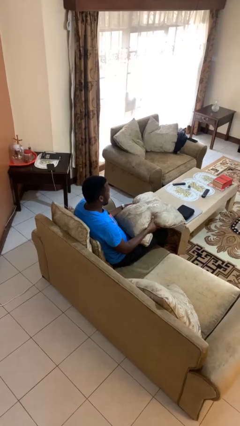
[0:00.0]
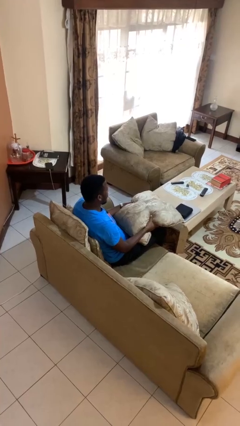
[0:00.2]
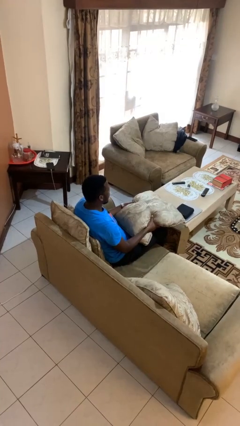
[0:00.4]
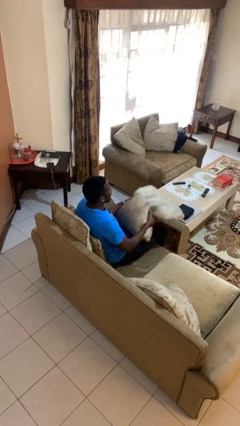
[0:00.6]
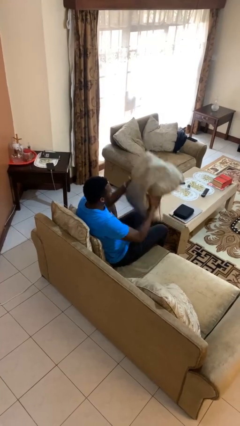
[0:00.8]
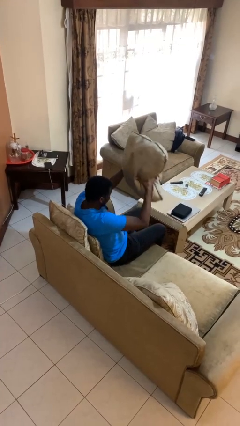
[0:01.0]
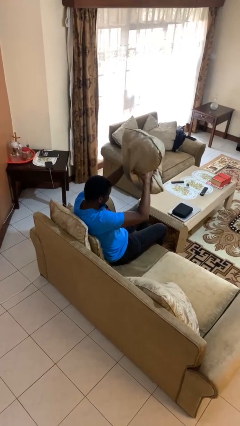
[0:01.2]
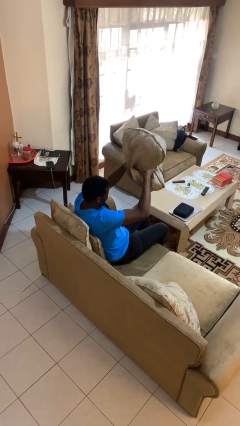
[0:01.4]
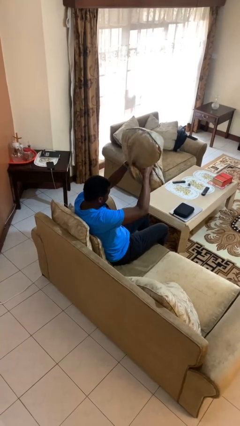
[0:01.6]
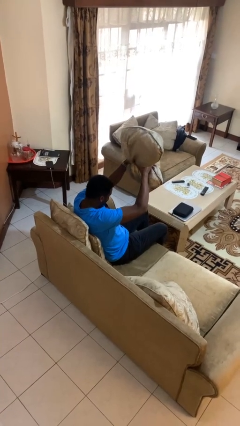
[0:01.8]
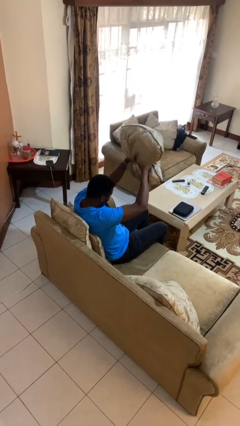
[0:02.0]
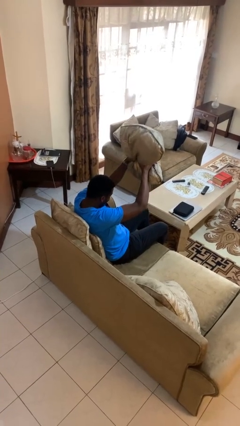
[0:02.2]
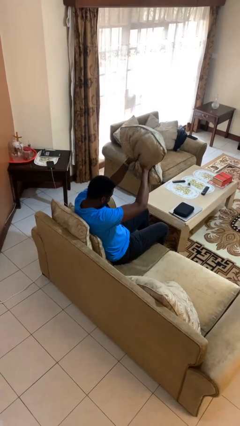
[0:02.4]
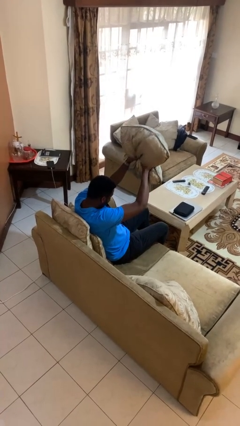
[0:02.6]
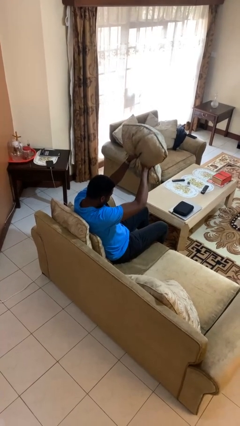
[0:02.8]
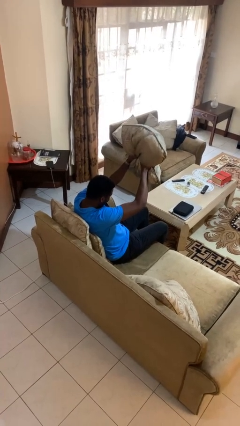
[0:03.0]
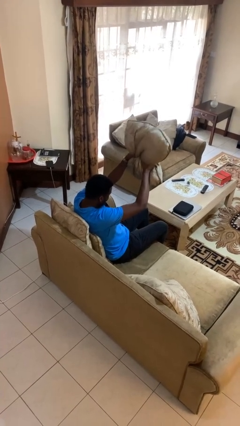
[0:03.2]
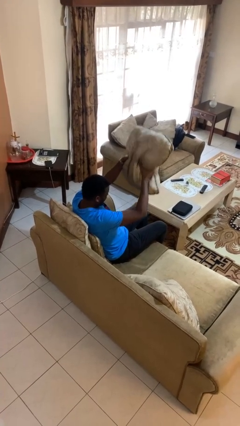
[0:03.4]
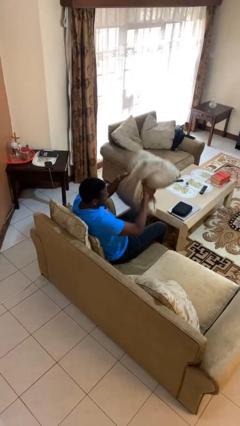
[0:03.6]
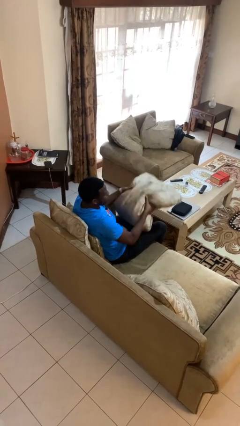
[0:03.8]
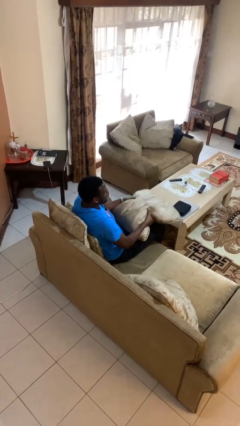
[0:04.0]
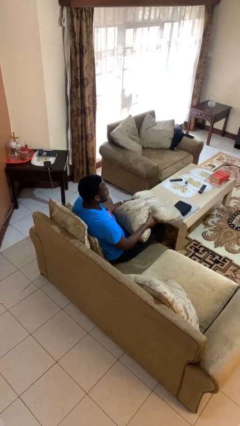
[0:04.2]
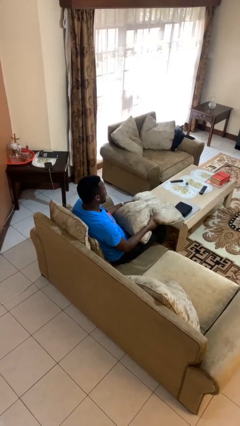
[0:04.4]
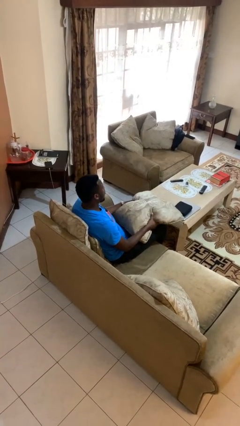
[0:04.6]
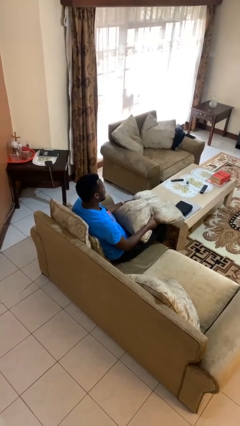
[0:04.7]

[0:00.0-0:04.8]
person squeezes object

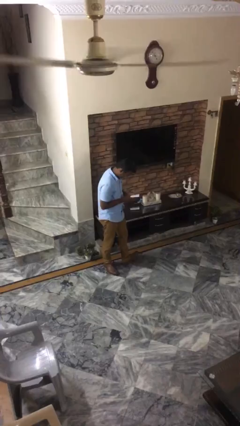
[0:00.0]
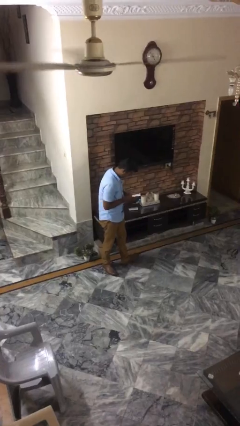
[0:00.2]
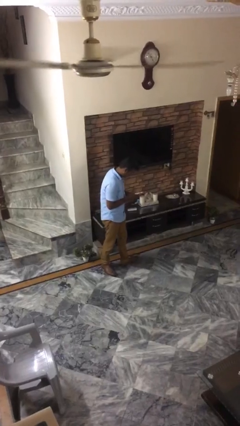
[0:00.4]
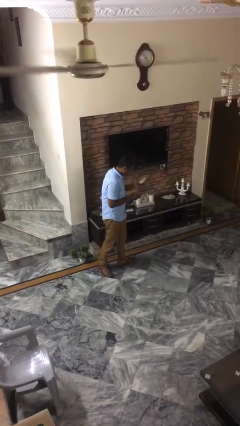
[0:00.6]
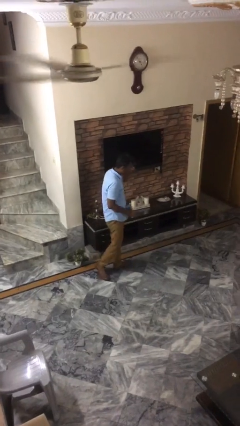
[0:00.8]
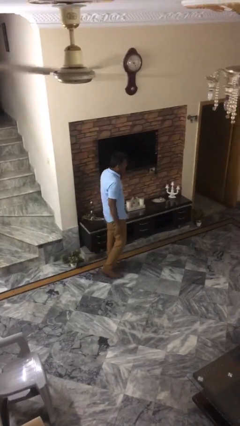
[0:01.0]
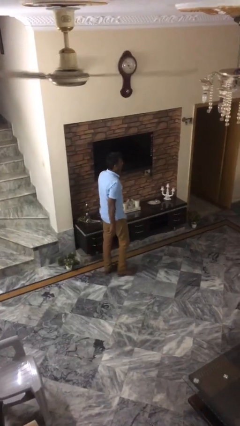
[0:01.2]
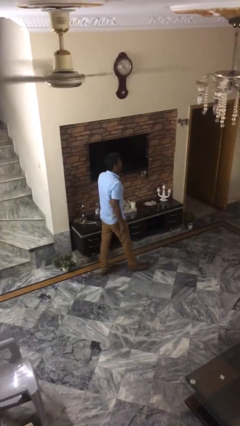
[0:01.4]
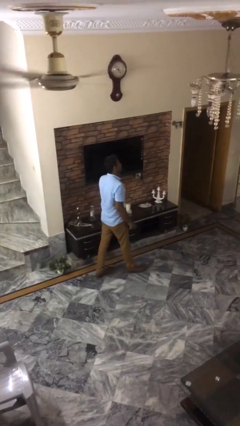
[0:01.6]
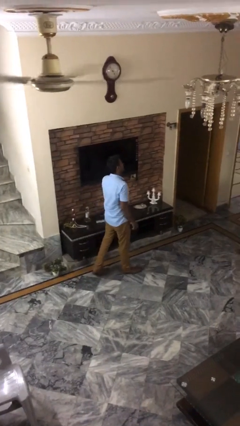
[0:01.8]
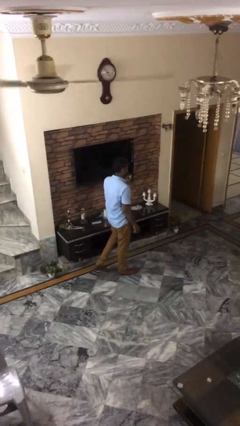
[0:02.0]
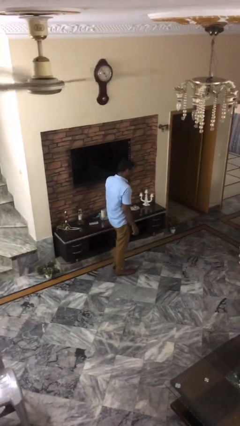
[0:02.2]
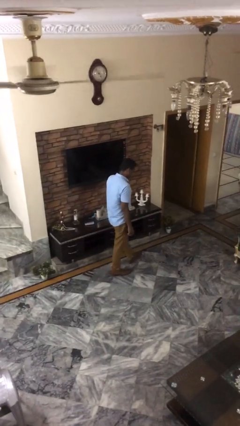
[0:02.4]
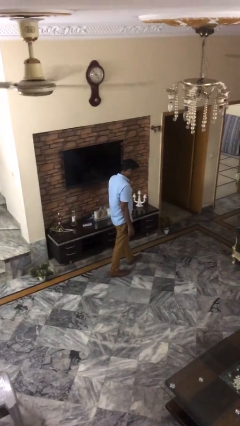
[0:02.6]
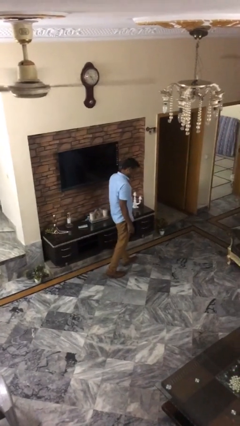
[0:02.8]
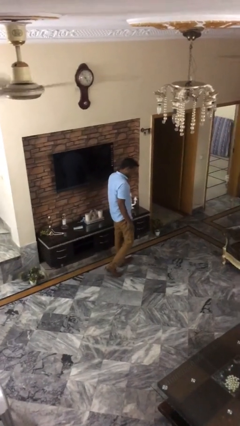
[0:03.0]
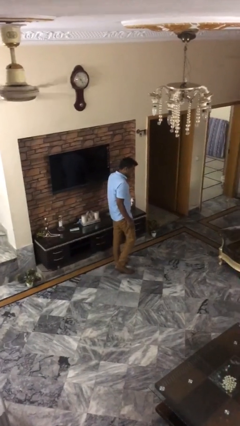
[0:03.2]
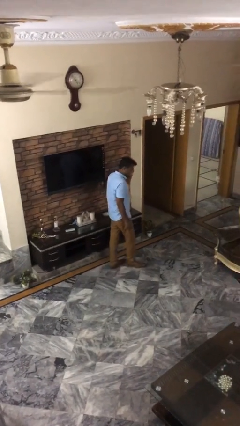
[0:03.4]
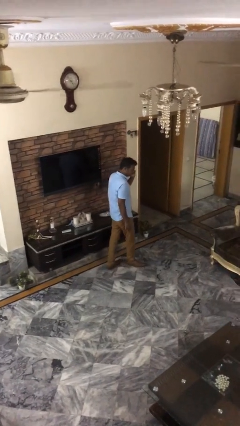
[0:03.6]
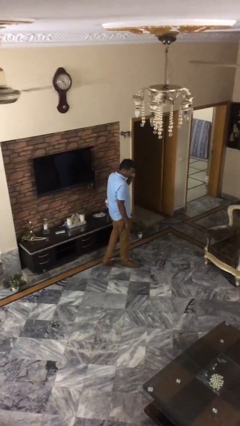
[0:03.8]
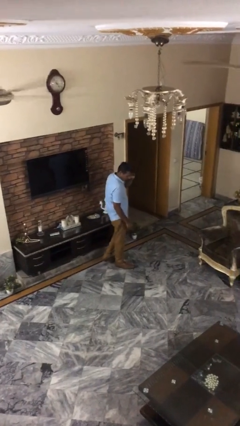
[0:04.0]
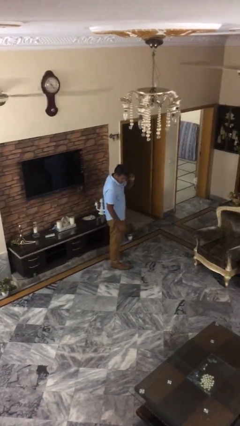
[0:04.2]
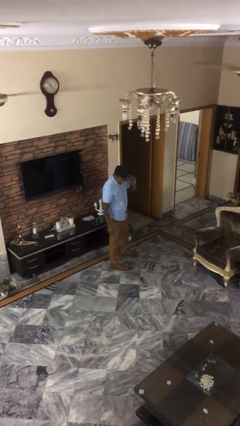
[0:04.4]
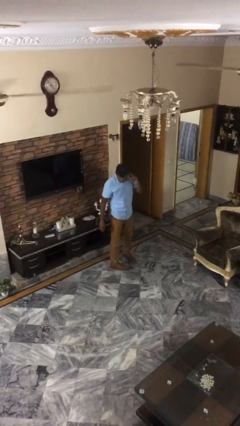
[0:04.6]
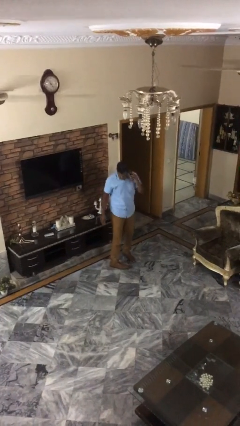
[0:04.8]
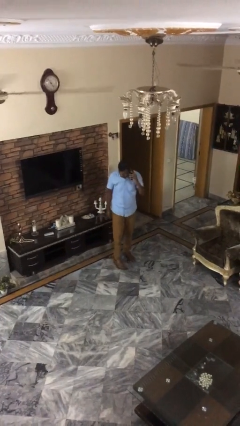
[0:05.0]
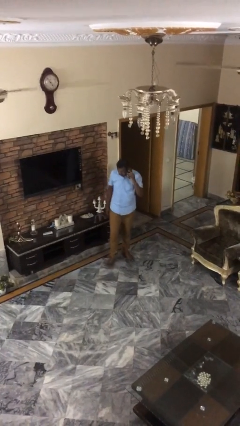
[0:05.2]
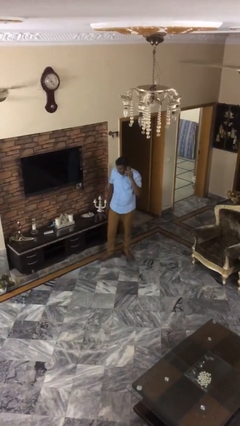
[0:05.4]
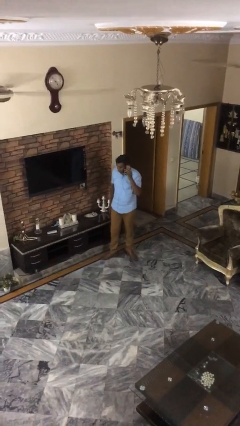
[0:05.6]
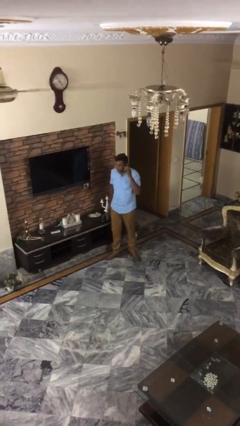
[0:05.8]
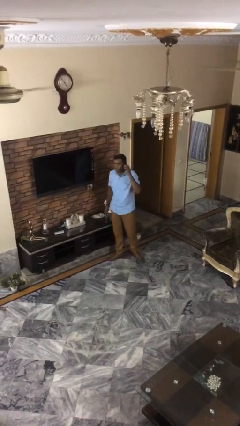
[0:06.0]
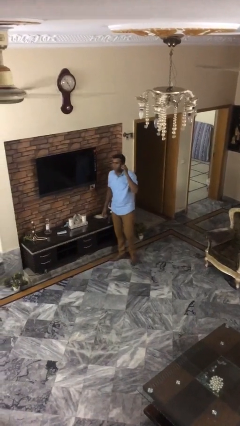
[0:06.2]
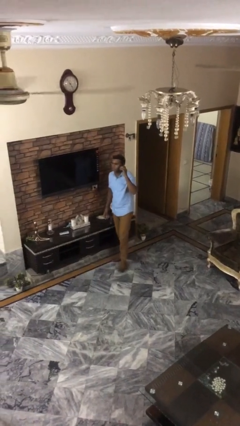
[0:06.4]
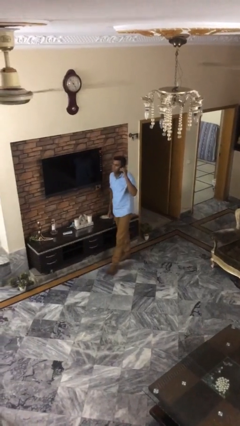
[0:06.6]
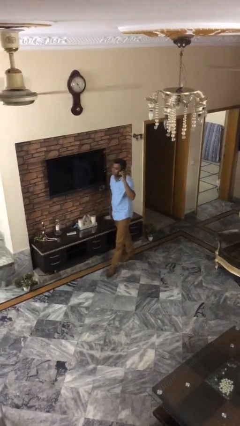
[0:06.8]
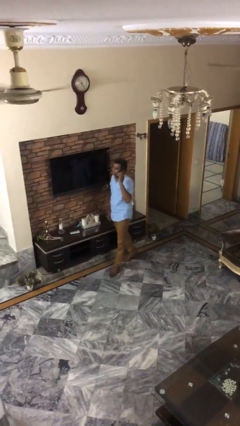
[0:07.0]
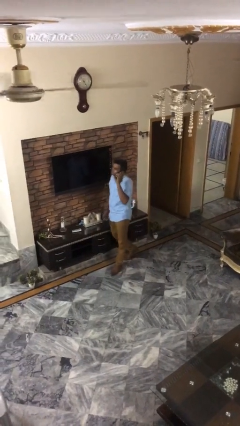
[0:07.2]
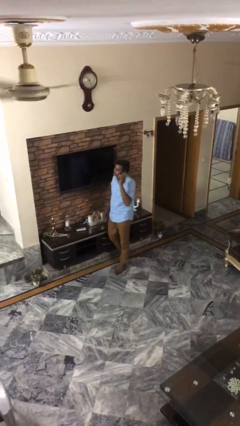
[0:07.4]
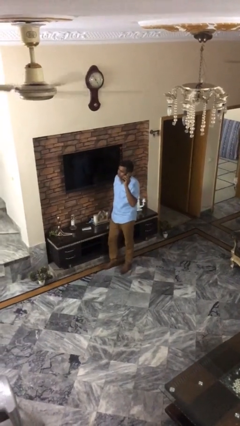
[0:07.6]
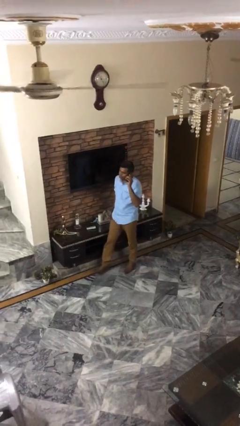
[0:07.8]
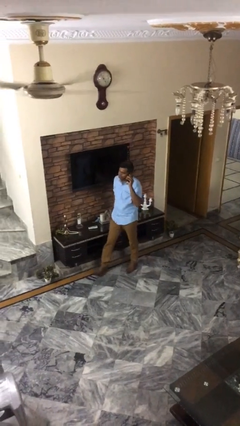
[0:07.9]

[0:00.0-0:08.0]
person talks on phone

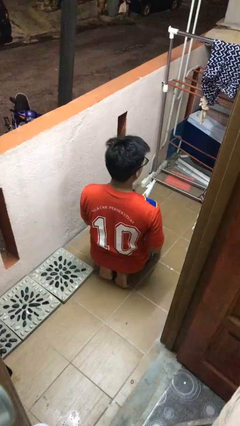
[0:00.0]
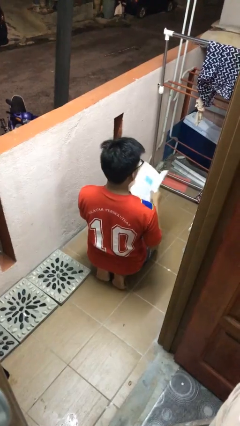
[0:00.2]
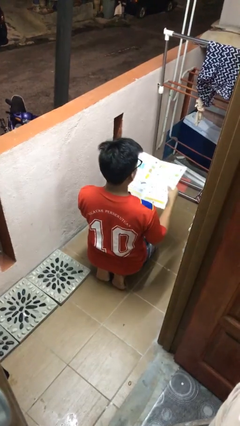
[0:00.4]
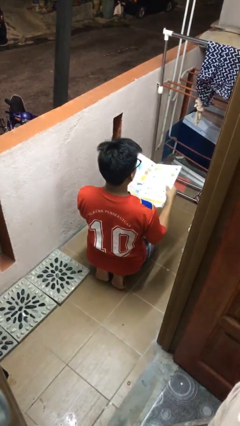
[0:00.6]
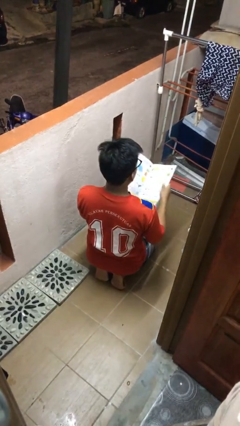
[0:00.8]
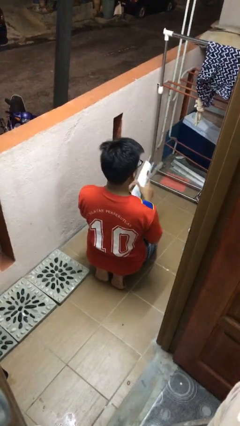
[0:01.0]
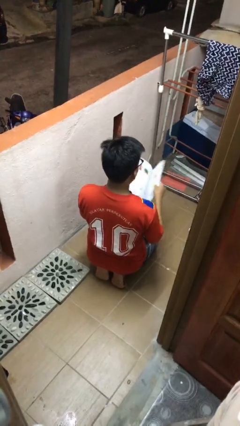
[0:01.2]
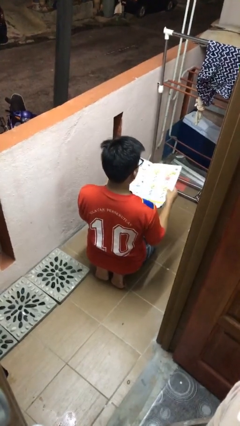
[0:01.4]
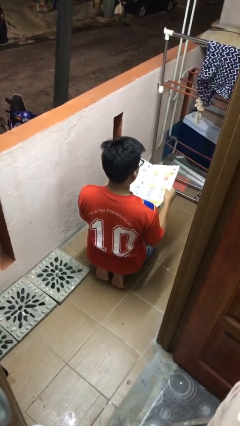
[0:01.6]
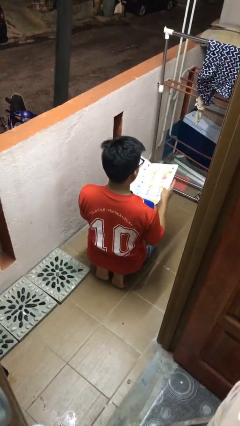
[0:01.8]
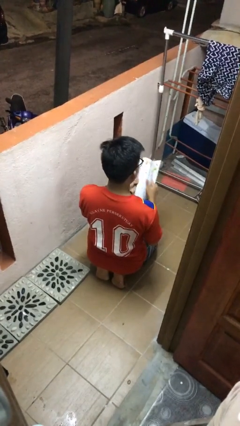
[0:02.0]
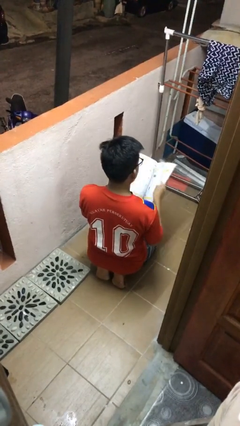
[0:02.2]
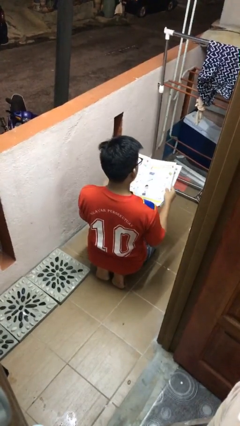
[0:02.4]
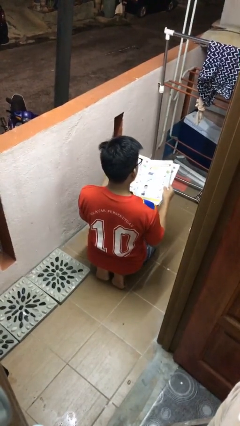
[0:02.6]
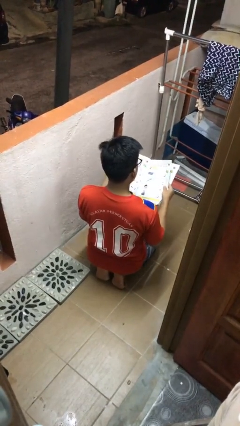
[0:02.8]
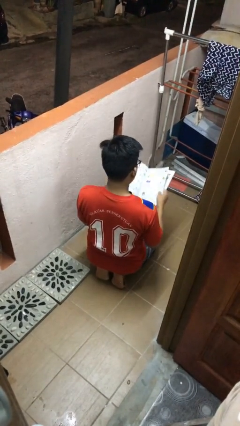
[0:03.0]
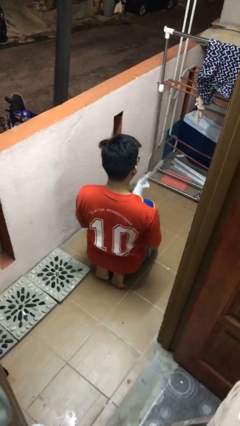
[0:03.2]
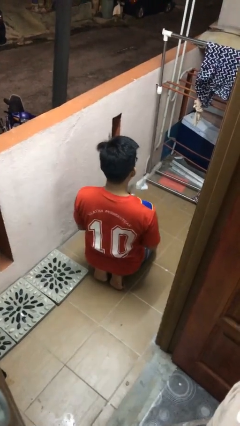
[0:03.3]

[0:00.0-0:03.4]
person reads magazine

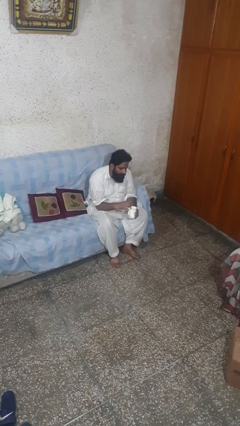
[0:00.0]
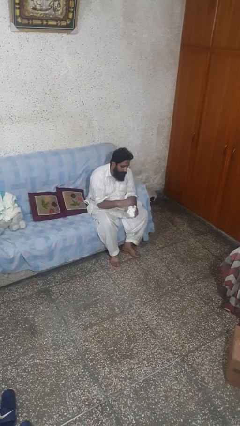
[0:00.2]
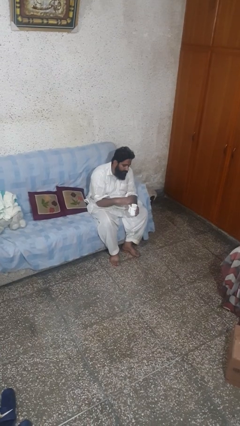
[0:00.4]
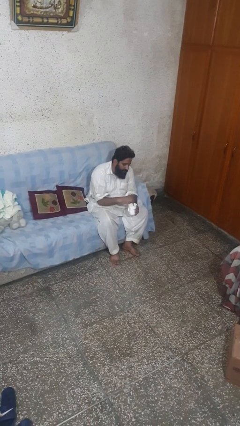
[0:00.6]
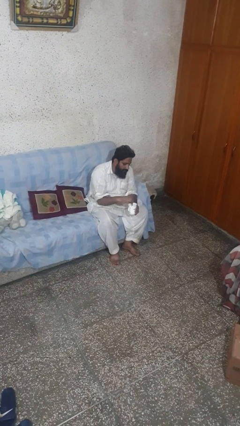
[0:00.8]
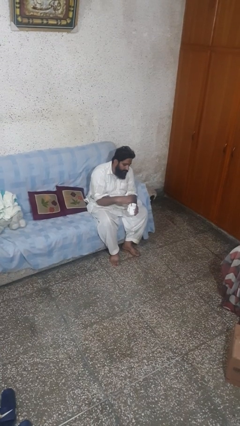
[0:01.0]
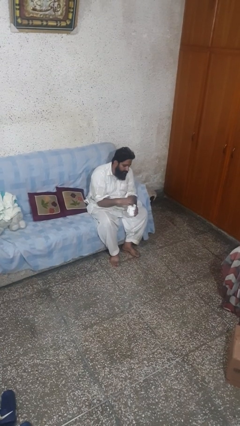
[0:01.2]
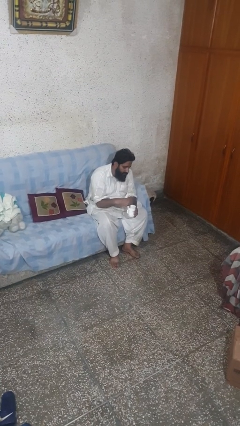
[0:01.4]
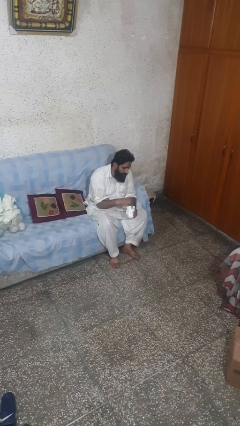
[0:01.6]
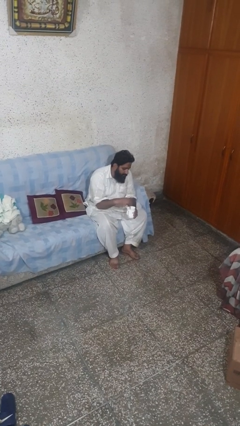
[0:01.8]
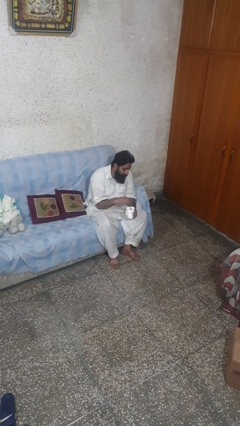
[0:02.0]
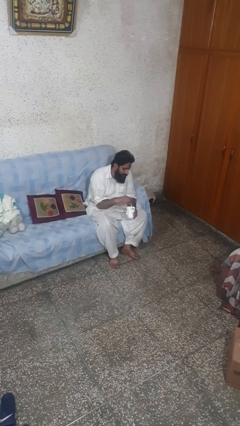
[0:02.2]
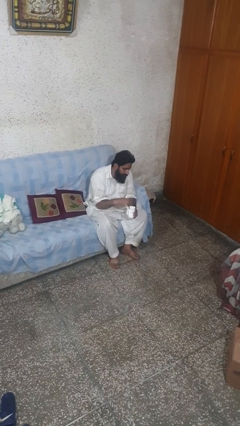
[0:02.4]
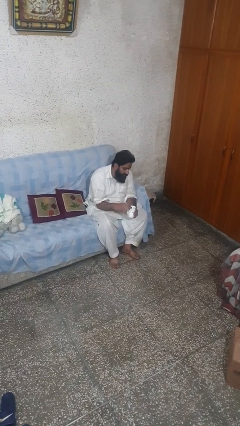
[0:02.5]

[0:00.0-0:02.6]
person stirs mug
